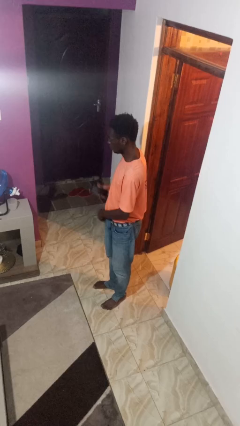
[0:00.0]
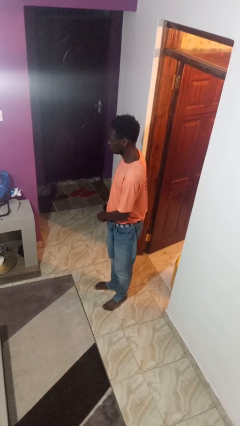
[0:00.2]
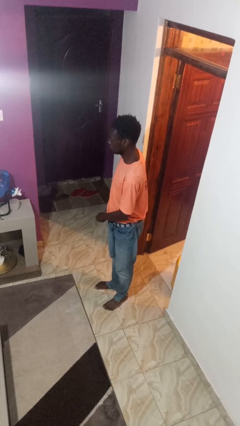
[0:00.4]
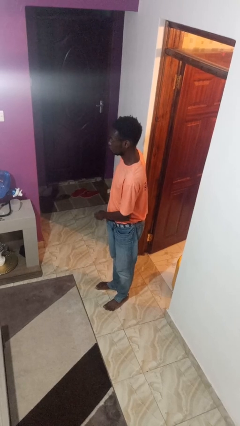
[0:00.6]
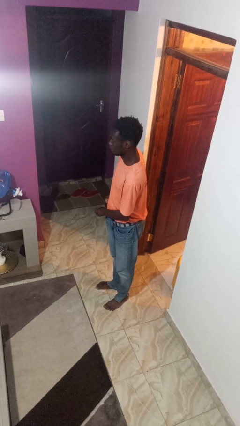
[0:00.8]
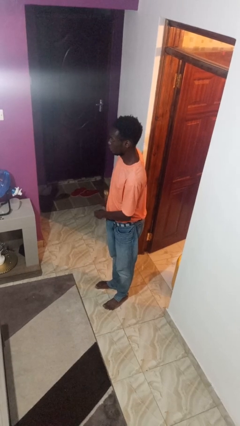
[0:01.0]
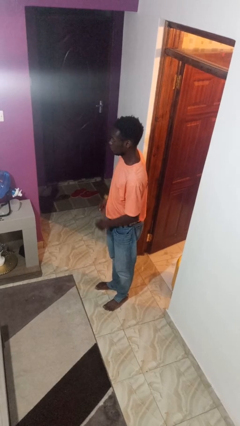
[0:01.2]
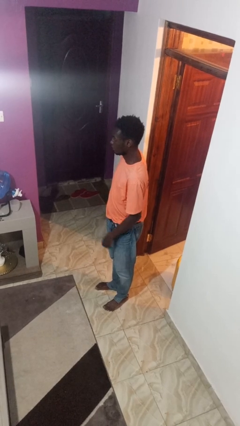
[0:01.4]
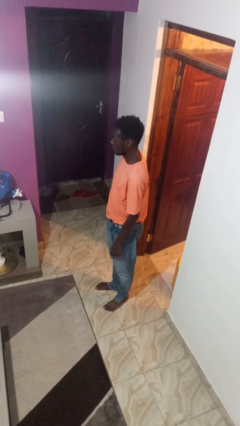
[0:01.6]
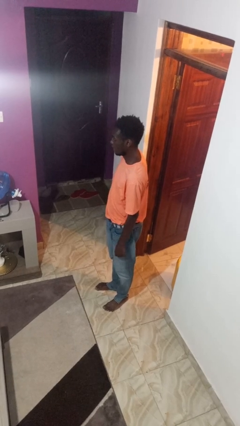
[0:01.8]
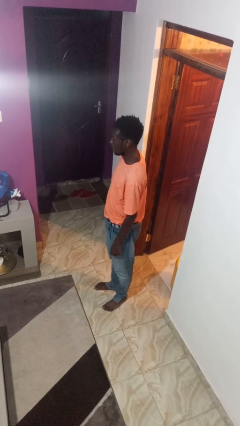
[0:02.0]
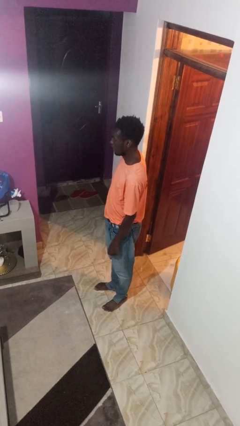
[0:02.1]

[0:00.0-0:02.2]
person puts phone into pocket

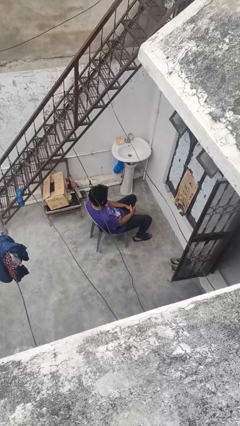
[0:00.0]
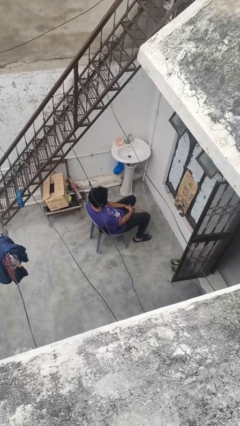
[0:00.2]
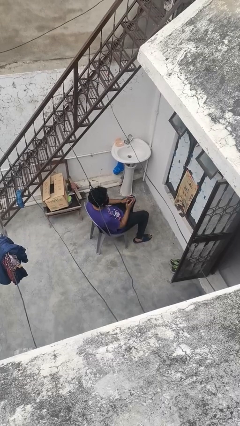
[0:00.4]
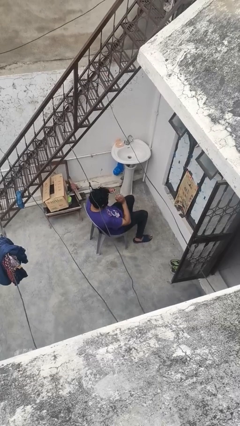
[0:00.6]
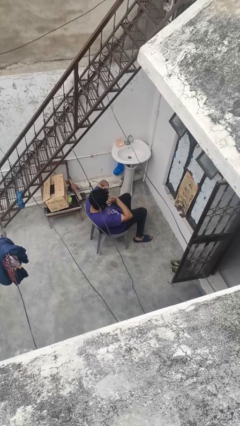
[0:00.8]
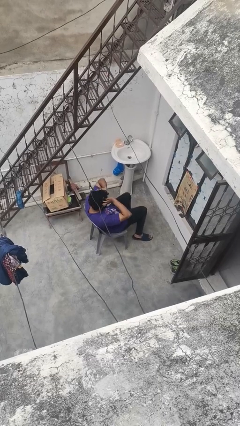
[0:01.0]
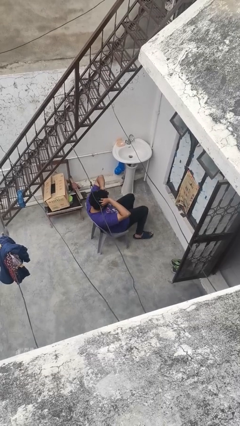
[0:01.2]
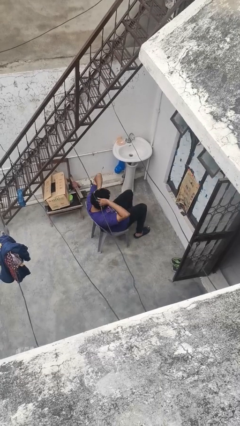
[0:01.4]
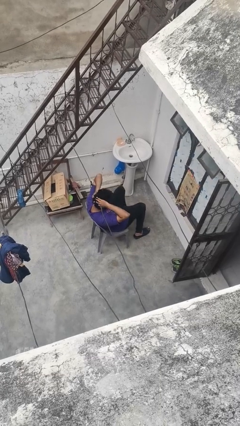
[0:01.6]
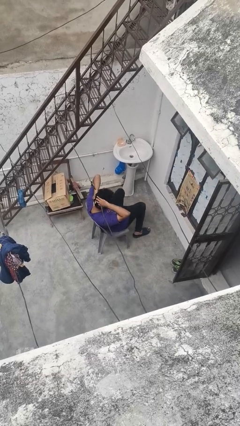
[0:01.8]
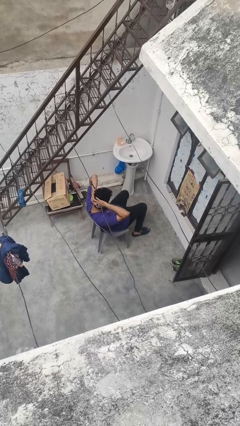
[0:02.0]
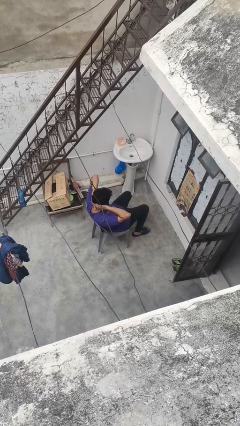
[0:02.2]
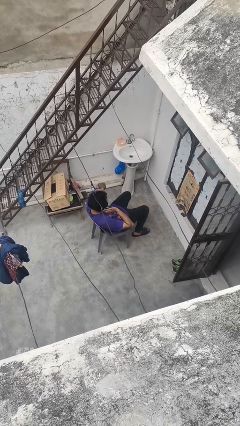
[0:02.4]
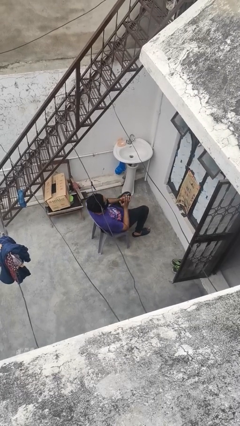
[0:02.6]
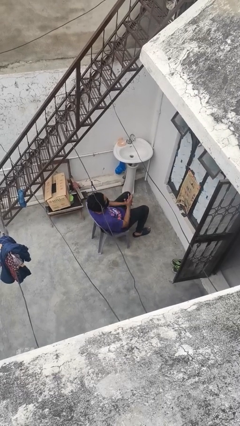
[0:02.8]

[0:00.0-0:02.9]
person strokes hair

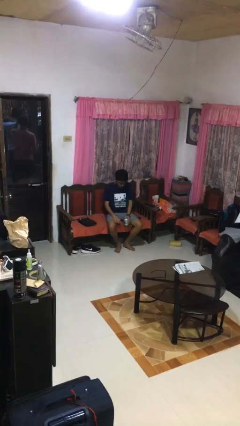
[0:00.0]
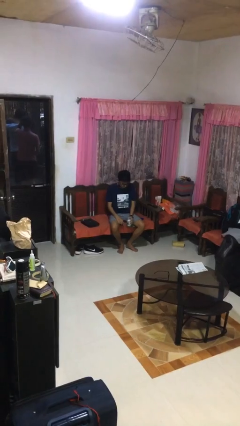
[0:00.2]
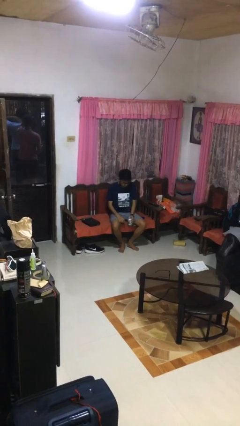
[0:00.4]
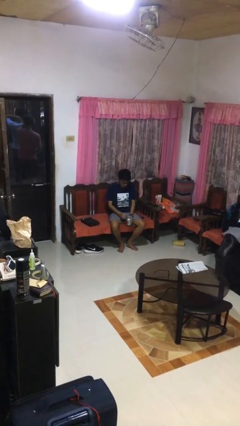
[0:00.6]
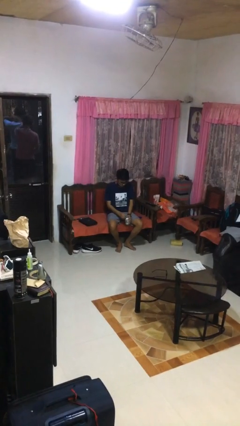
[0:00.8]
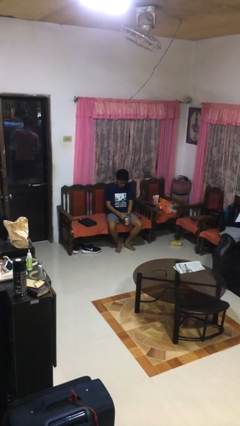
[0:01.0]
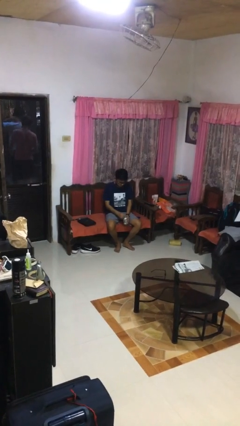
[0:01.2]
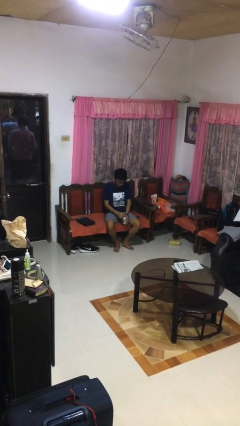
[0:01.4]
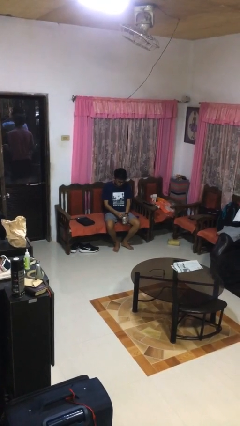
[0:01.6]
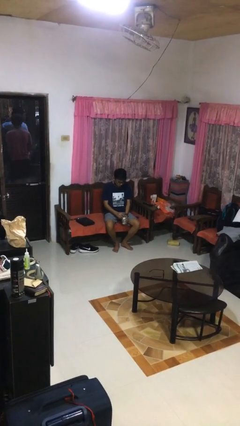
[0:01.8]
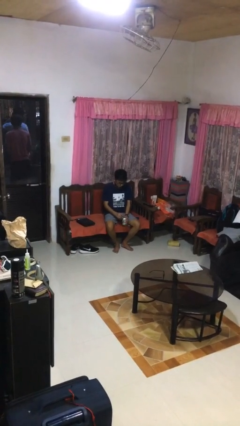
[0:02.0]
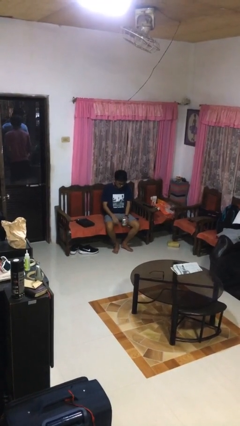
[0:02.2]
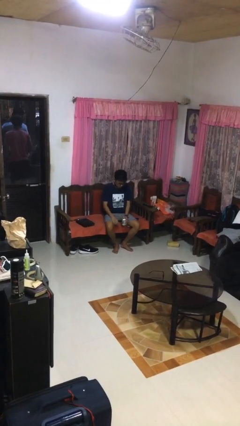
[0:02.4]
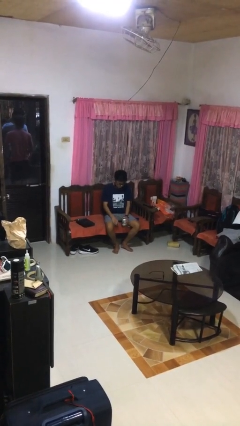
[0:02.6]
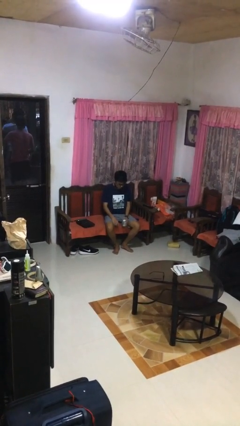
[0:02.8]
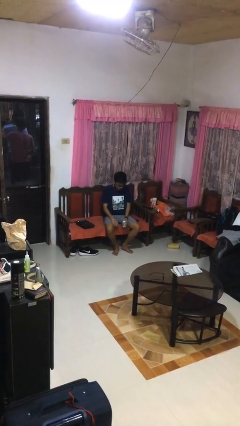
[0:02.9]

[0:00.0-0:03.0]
person opens beverage can

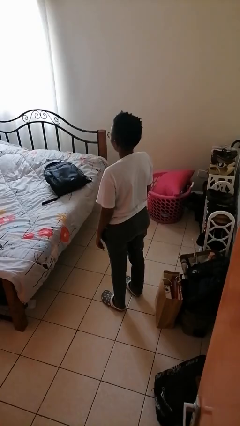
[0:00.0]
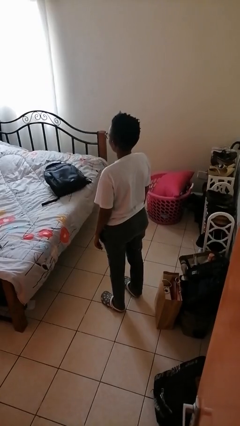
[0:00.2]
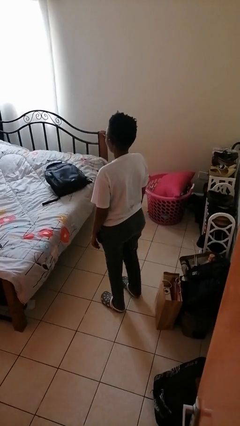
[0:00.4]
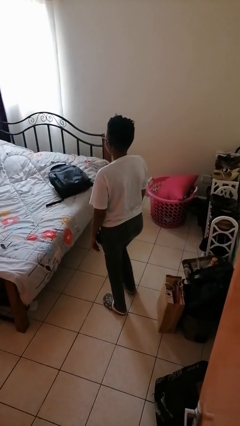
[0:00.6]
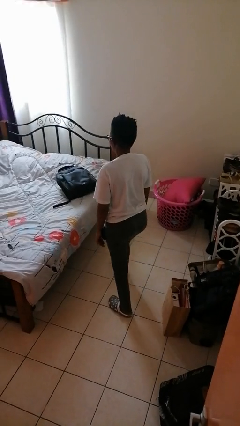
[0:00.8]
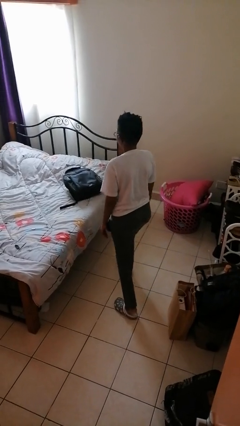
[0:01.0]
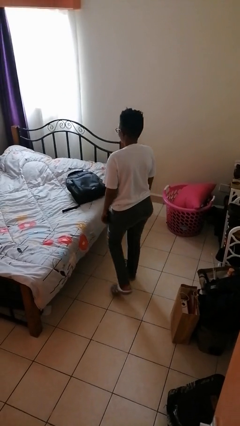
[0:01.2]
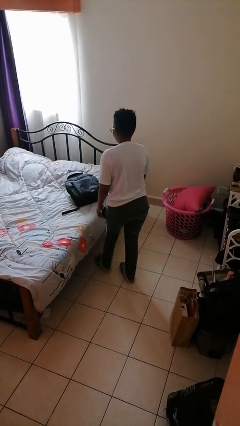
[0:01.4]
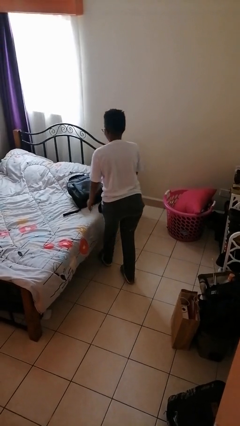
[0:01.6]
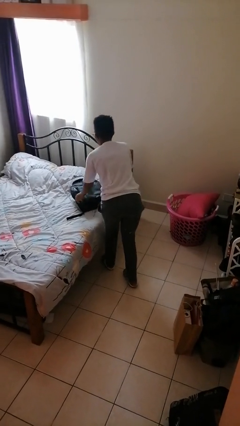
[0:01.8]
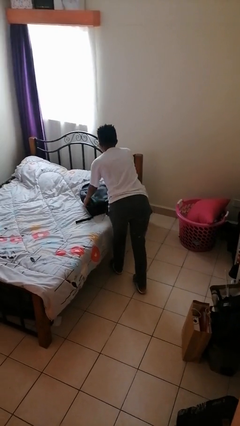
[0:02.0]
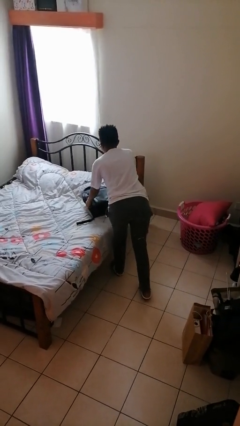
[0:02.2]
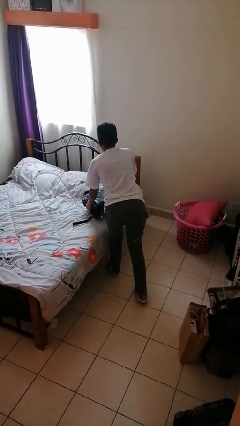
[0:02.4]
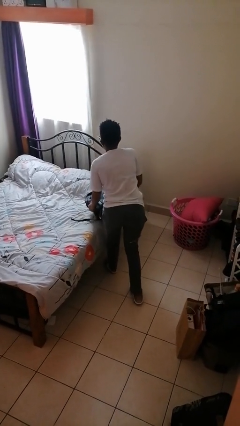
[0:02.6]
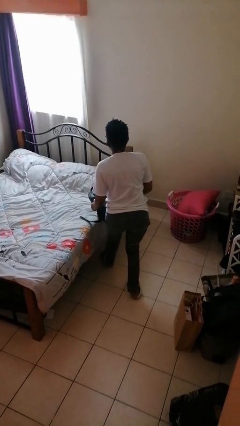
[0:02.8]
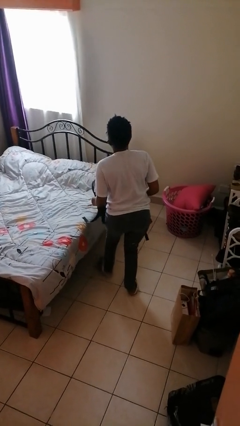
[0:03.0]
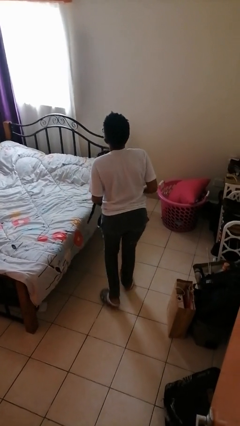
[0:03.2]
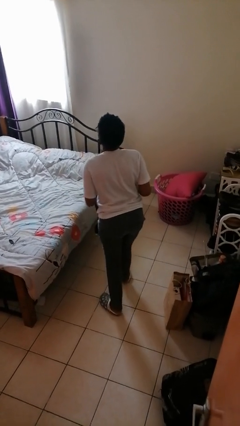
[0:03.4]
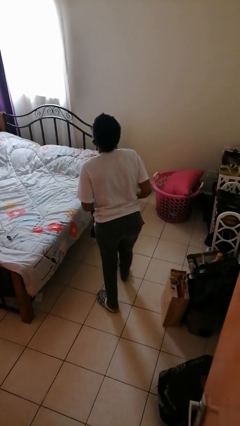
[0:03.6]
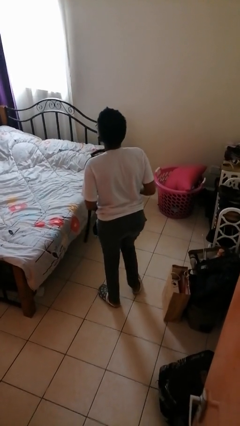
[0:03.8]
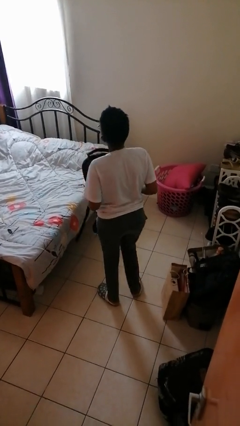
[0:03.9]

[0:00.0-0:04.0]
person picks up object from bed

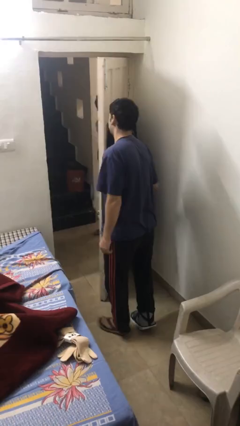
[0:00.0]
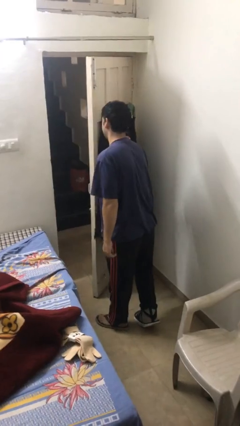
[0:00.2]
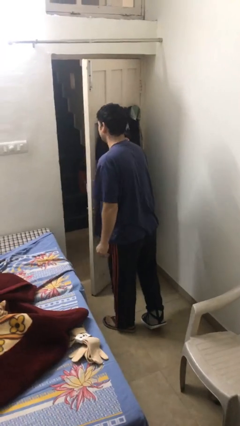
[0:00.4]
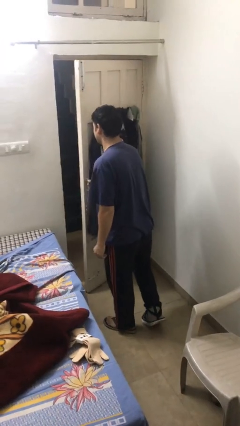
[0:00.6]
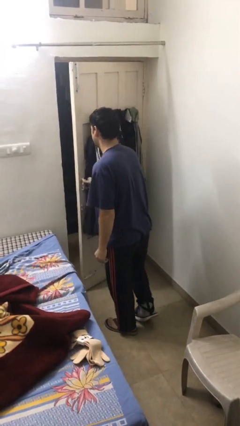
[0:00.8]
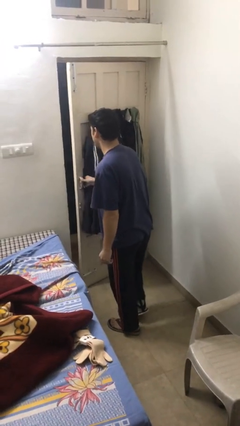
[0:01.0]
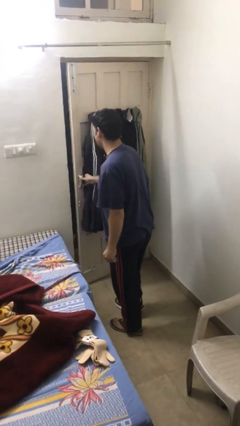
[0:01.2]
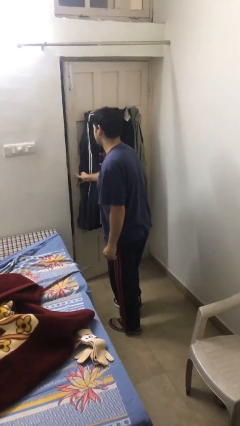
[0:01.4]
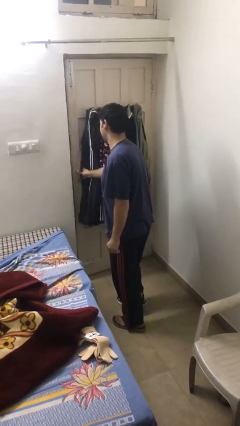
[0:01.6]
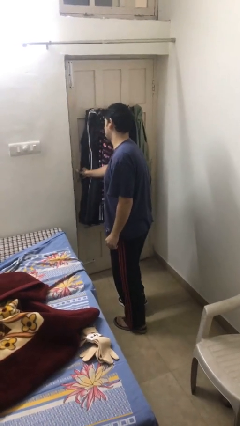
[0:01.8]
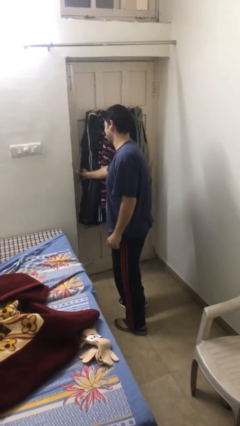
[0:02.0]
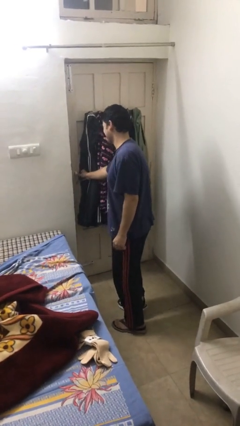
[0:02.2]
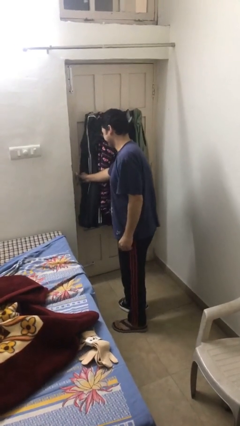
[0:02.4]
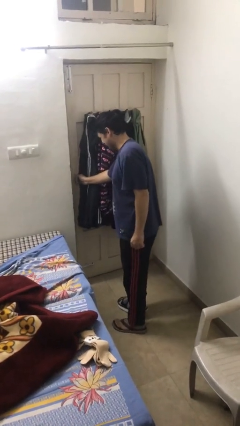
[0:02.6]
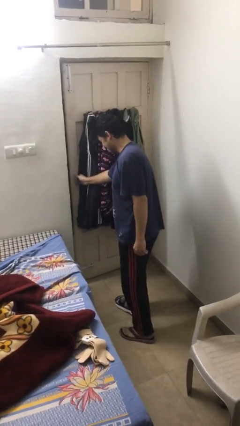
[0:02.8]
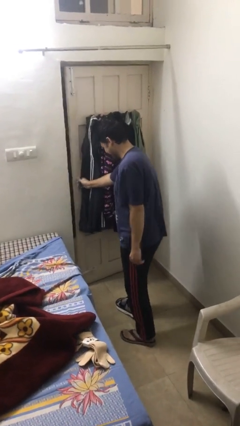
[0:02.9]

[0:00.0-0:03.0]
person closes facility door

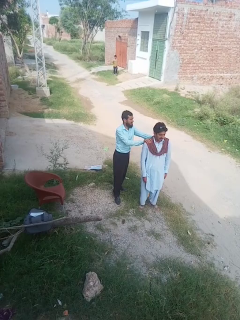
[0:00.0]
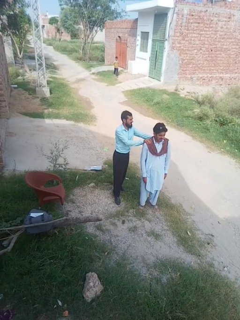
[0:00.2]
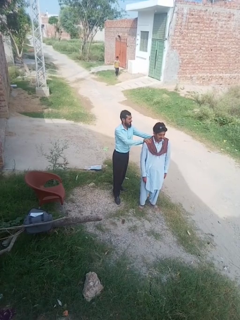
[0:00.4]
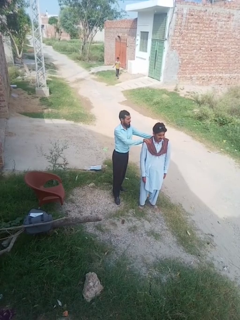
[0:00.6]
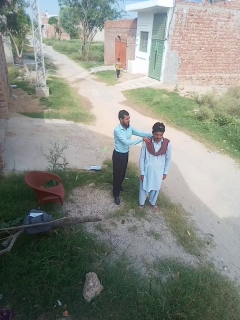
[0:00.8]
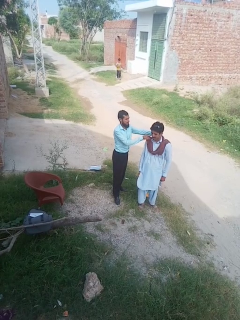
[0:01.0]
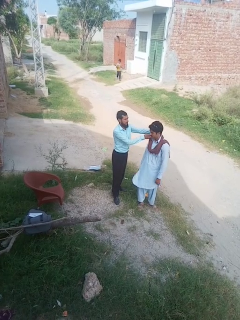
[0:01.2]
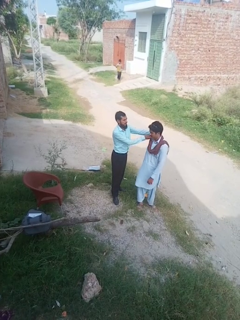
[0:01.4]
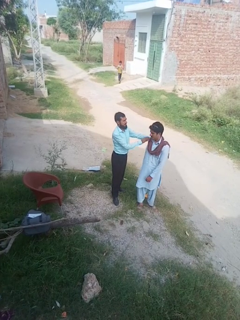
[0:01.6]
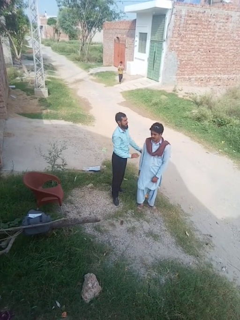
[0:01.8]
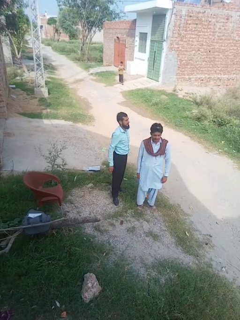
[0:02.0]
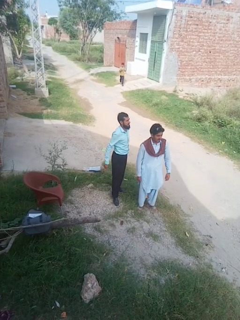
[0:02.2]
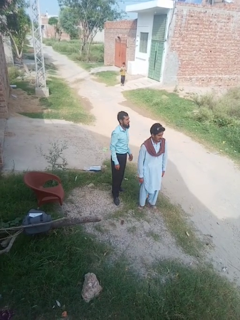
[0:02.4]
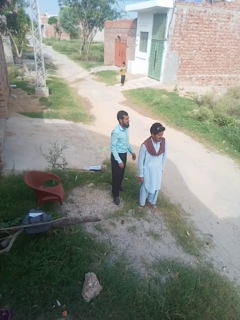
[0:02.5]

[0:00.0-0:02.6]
person spins person around

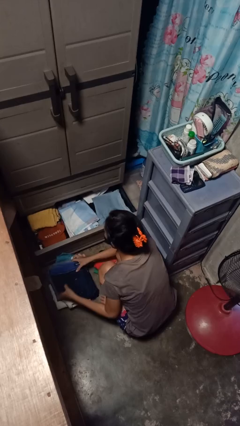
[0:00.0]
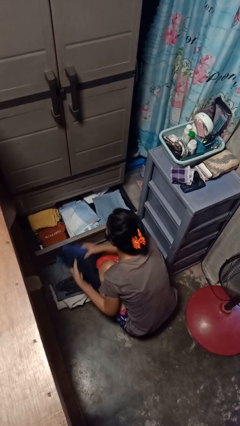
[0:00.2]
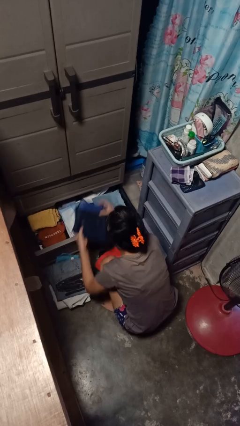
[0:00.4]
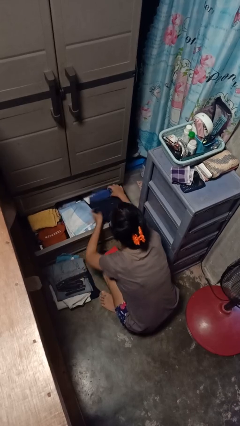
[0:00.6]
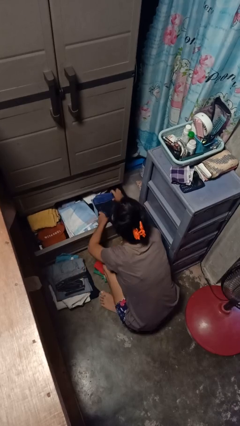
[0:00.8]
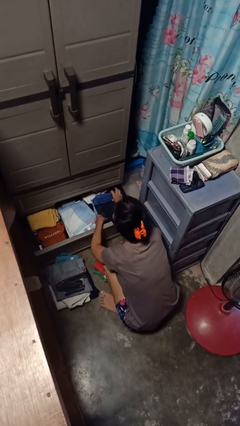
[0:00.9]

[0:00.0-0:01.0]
person puts clothes into dresser
